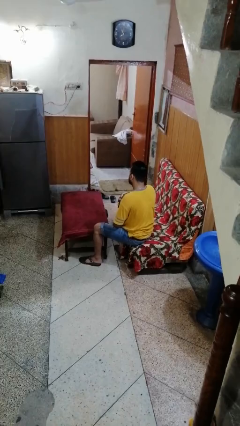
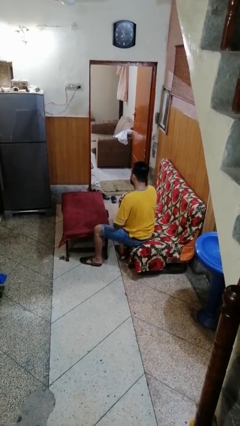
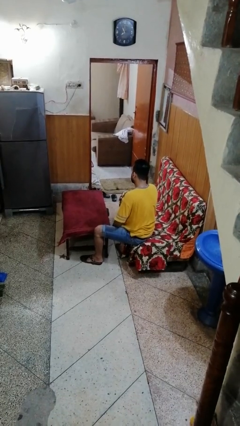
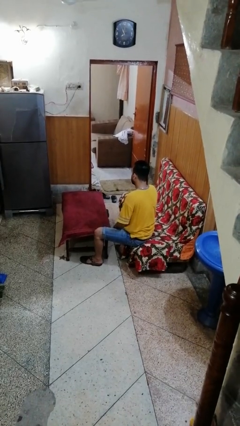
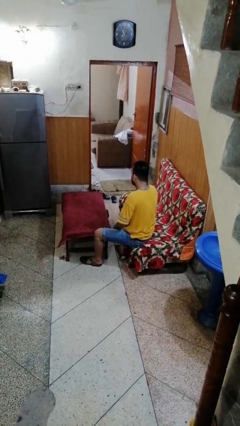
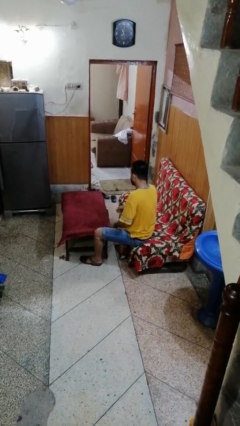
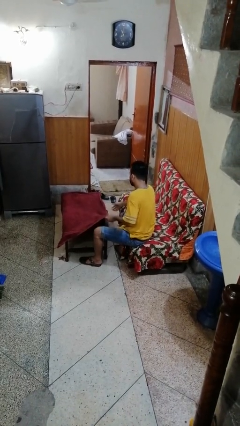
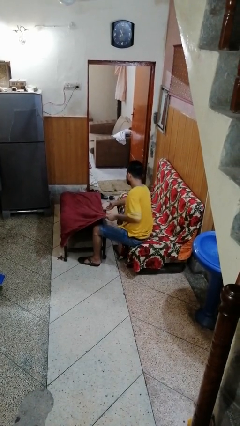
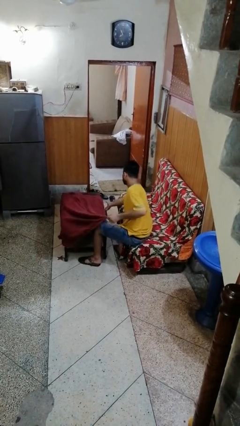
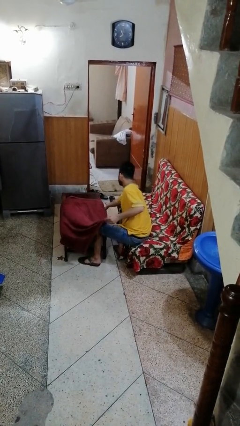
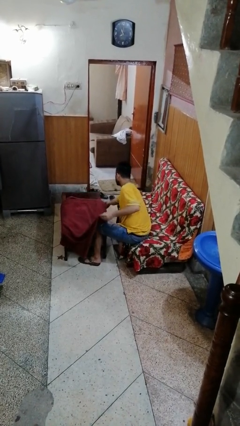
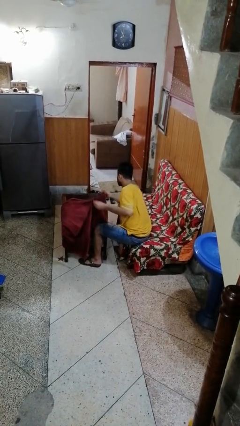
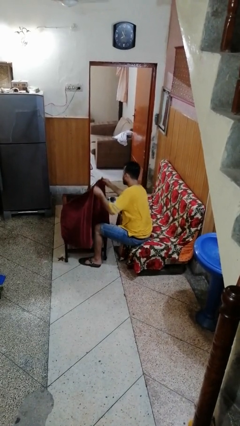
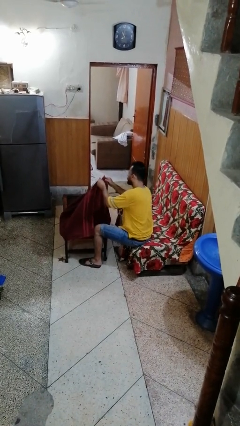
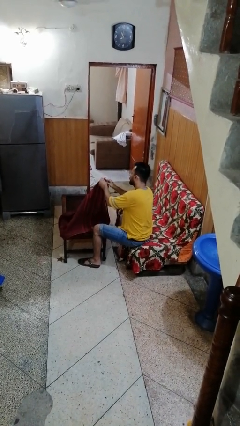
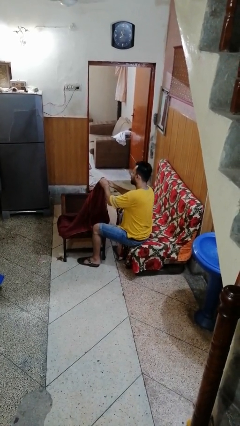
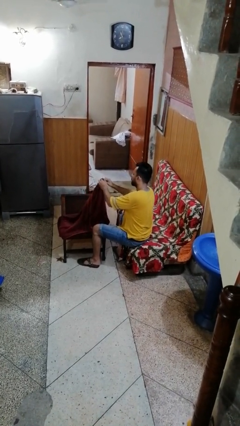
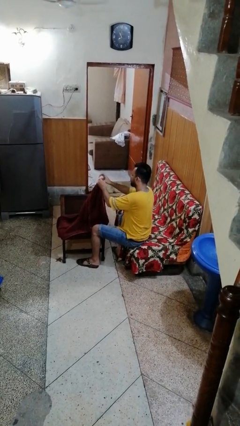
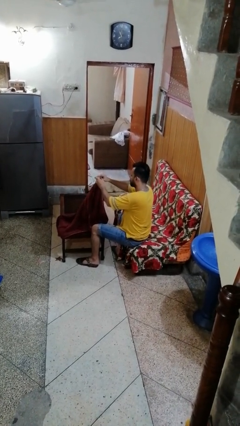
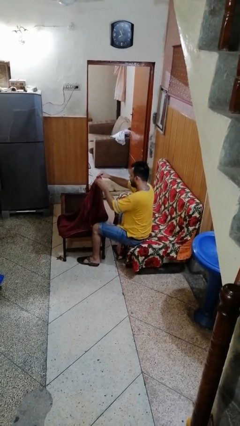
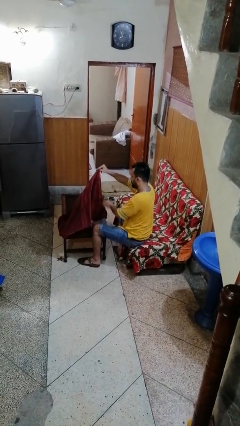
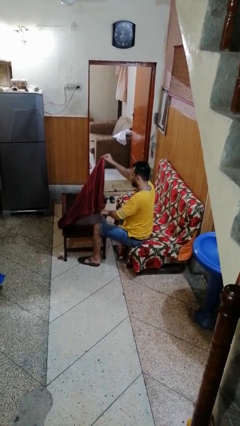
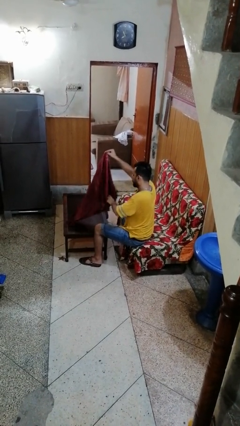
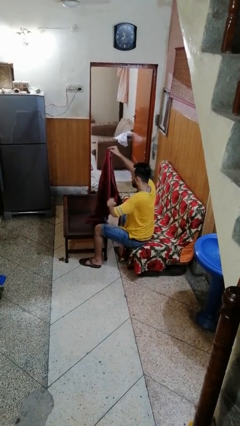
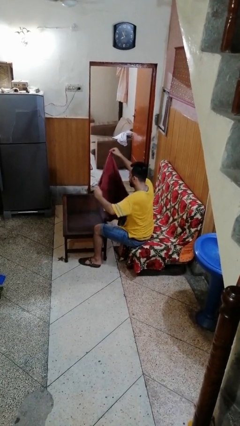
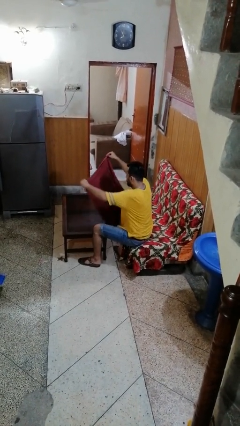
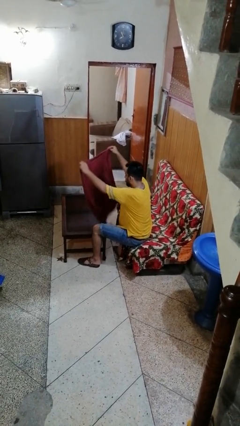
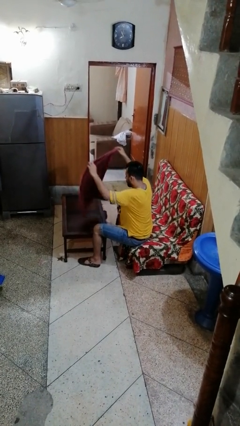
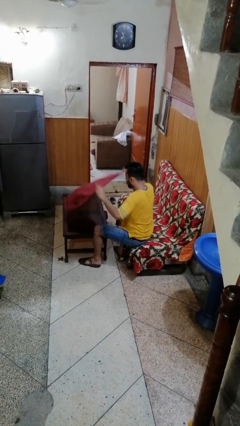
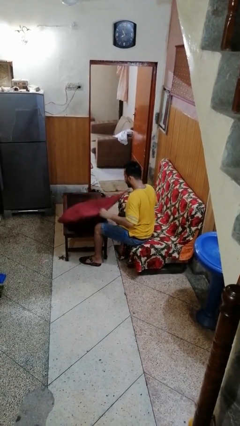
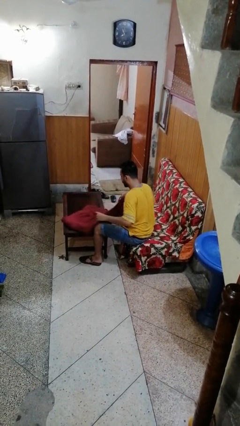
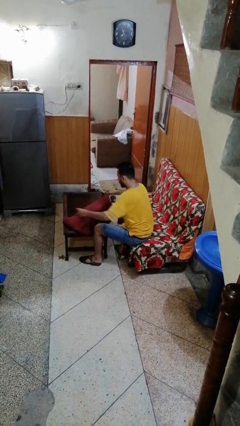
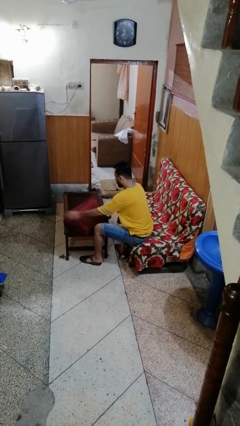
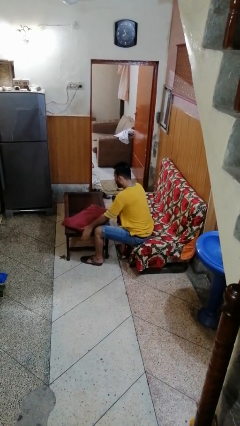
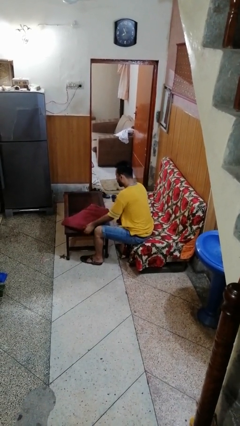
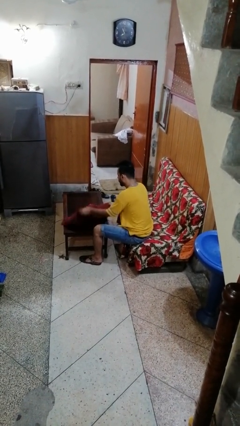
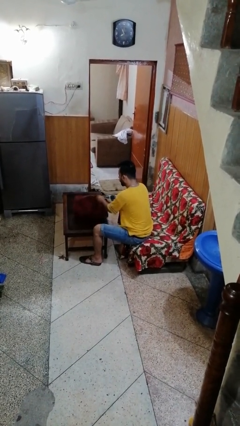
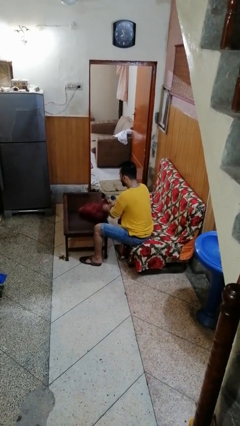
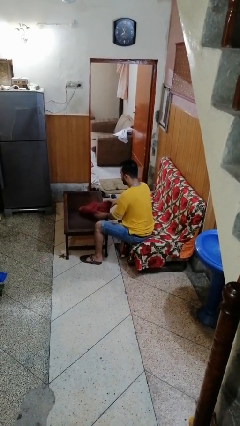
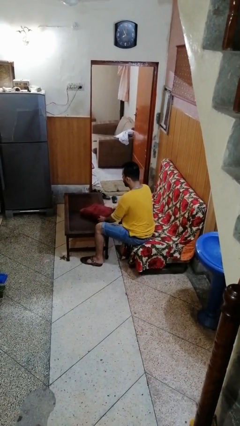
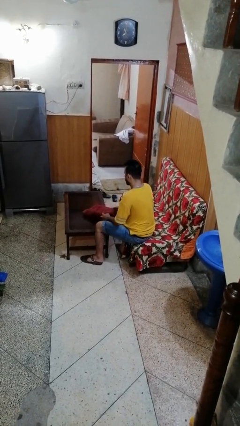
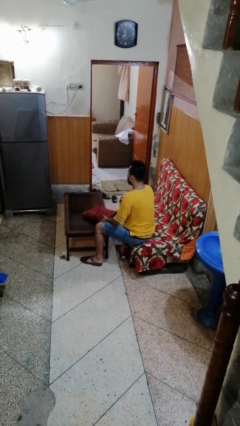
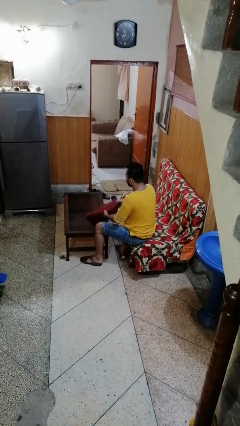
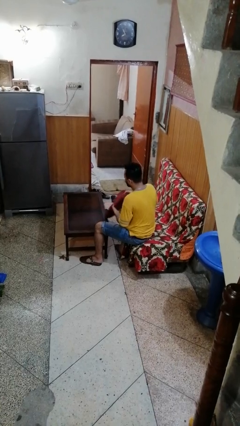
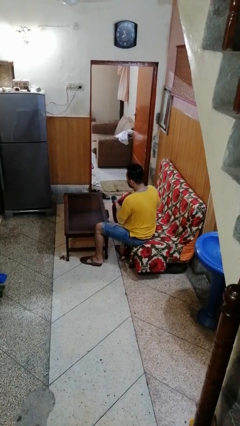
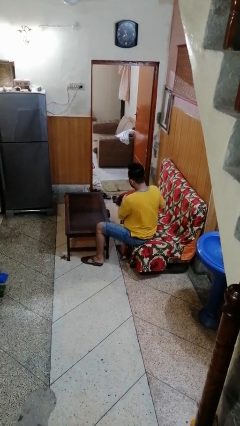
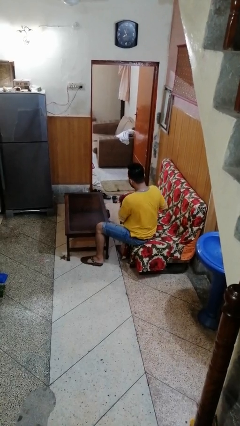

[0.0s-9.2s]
person folds tablecloth

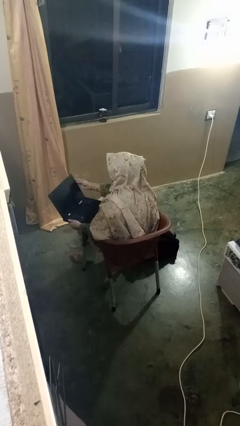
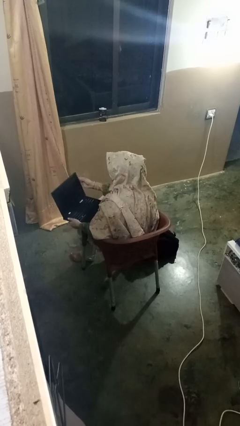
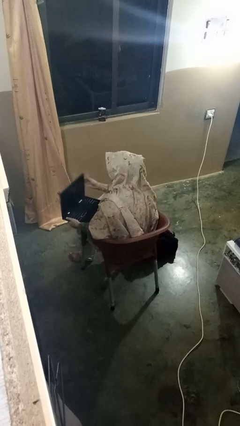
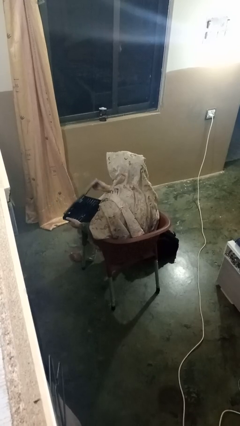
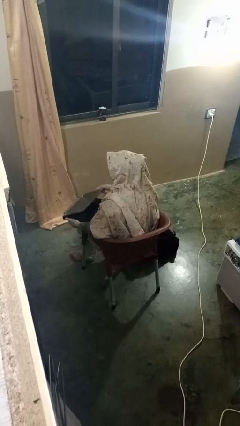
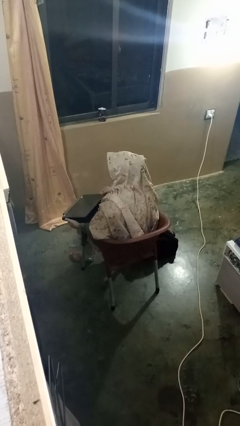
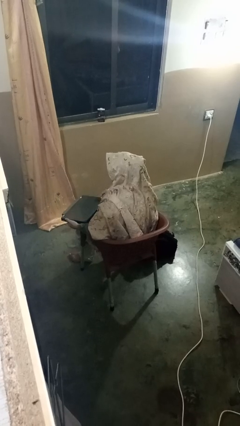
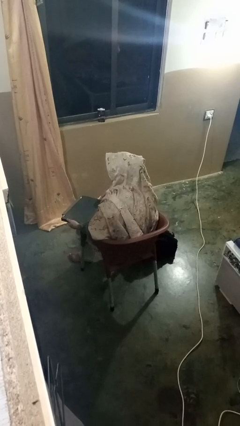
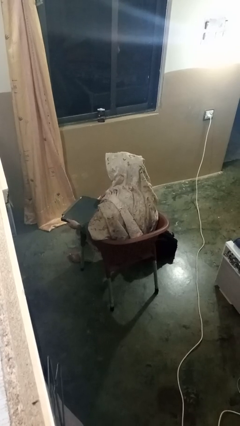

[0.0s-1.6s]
person closes laptop

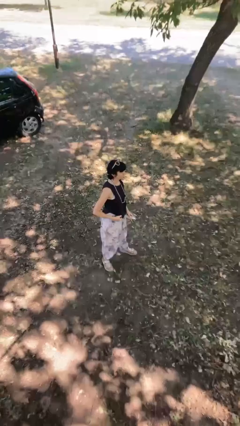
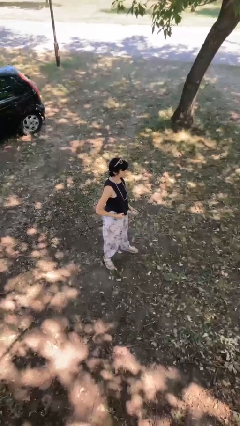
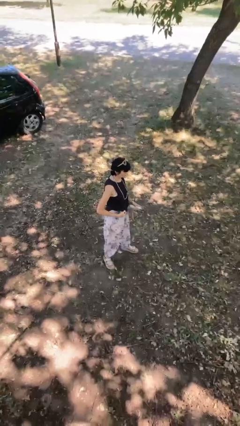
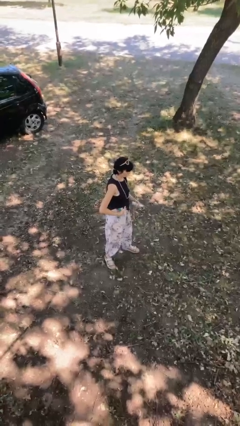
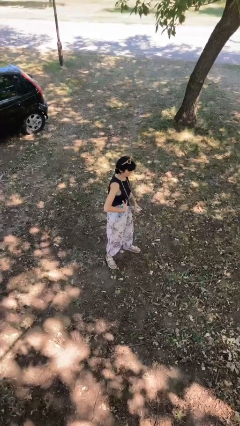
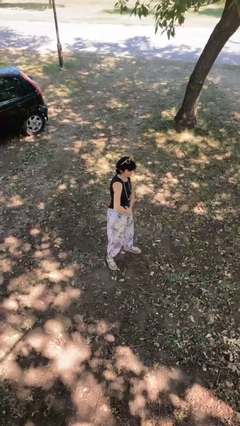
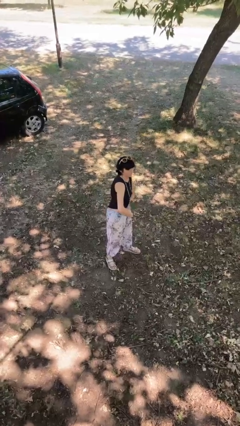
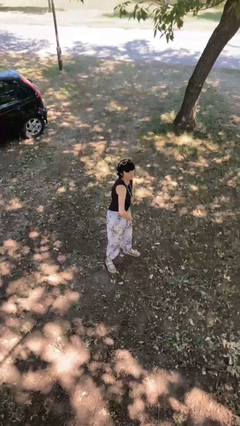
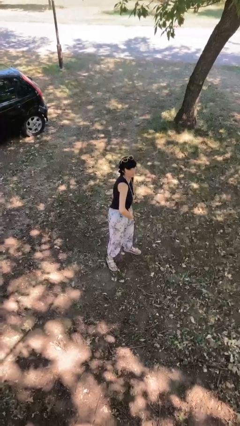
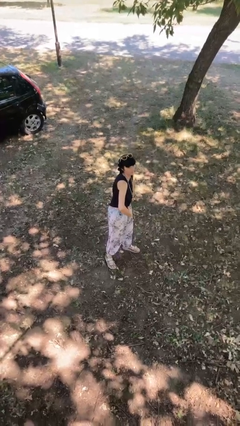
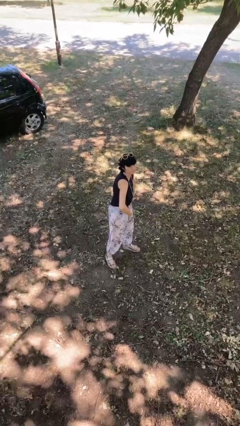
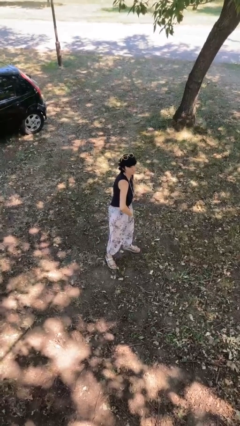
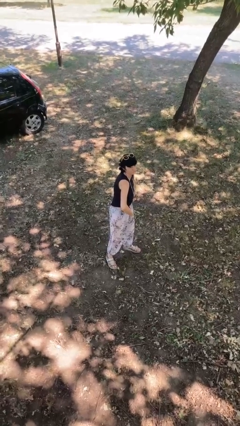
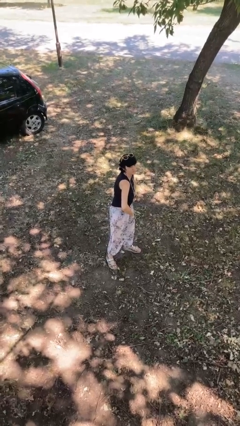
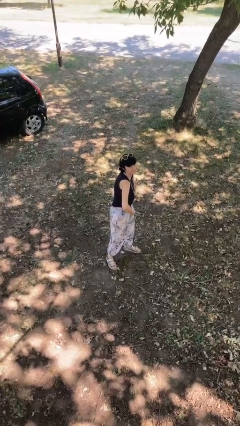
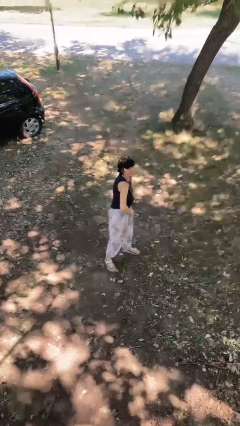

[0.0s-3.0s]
person applies deodorant

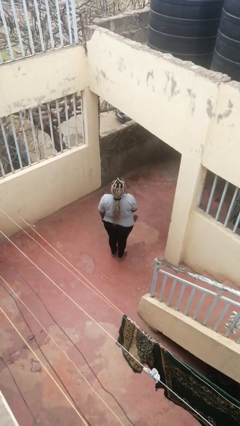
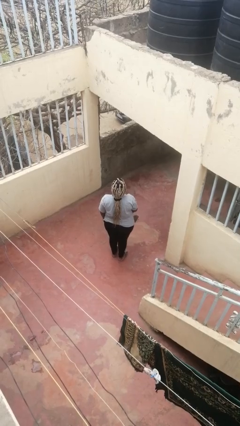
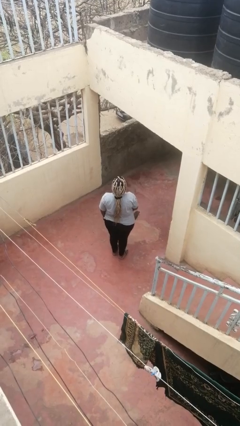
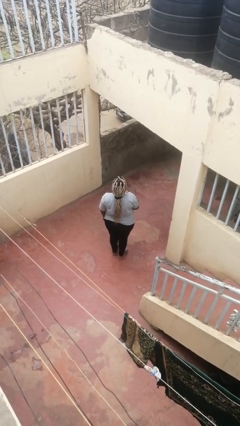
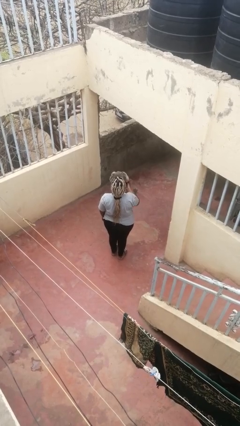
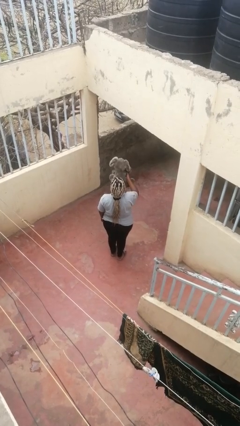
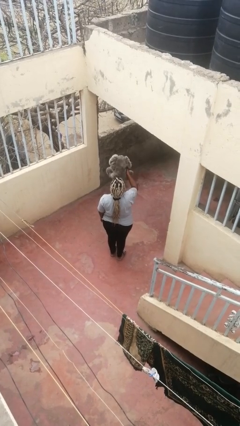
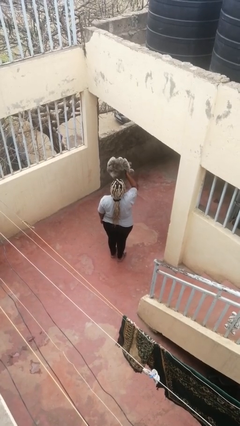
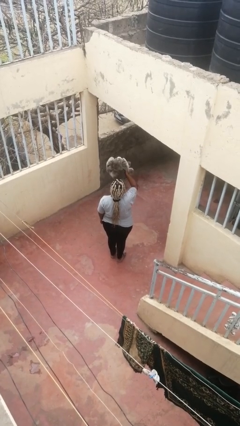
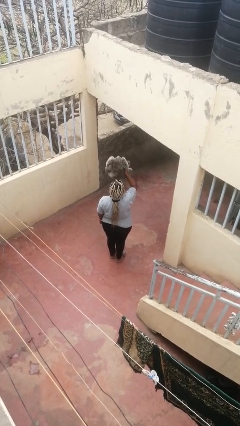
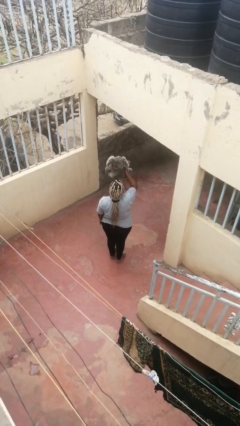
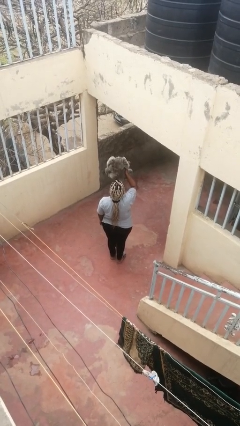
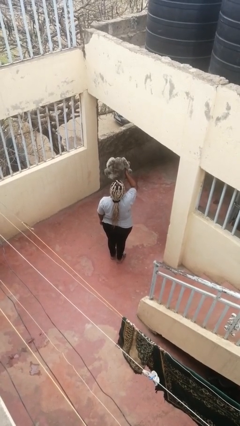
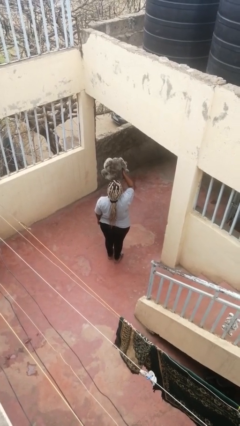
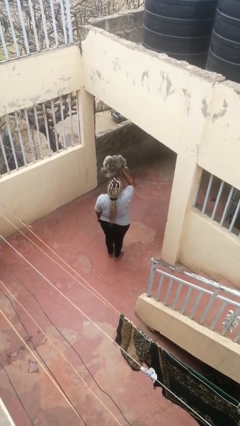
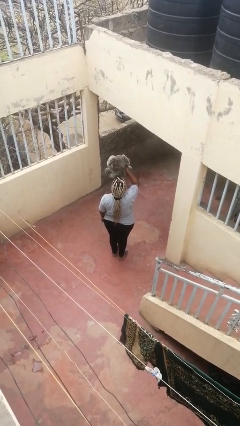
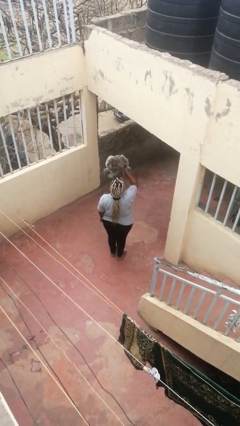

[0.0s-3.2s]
person holds object above head

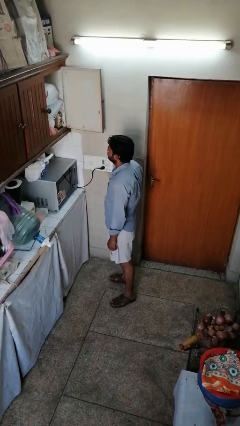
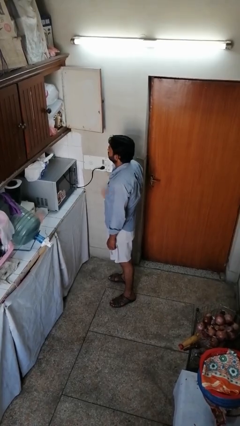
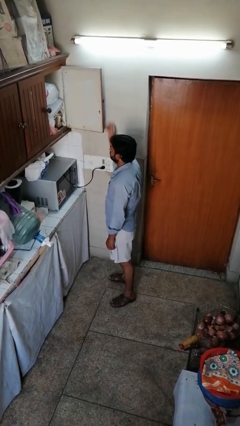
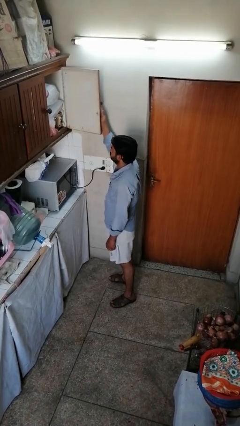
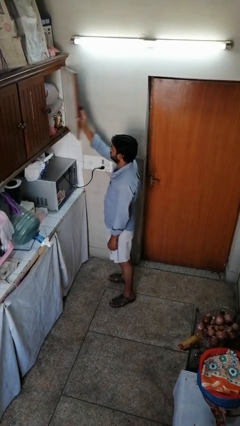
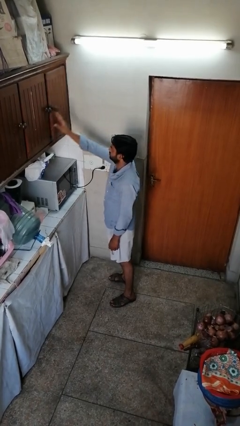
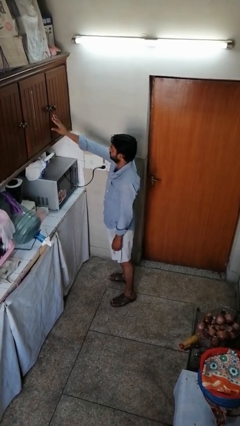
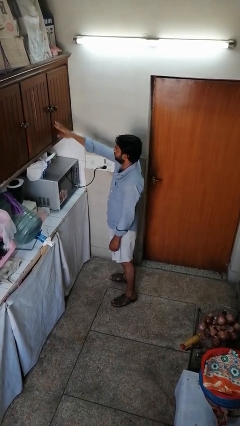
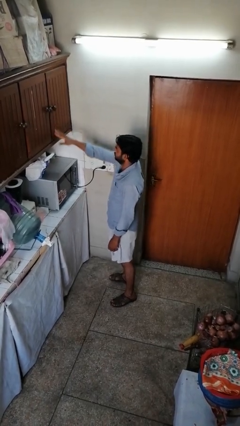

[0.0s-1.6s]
person closes cabinet
